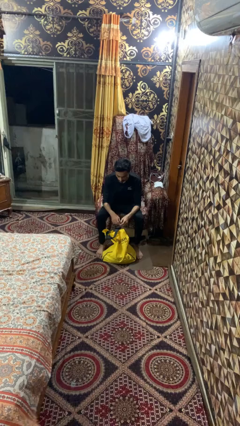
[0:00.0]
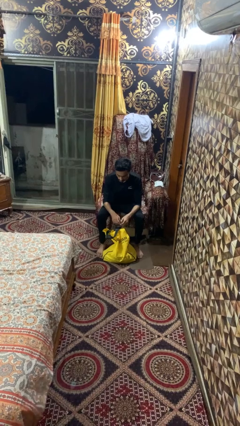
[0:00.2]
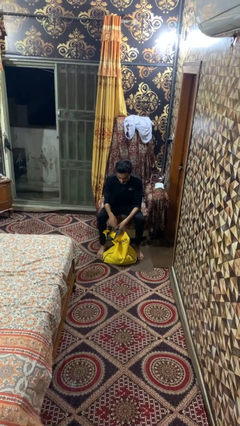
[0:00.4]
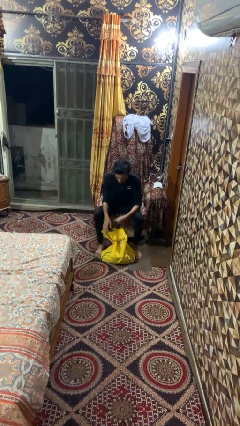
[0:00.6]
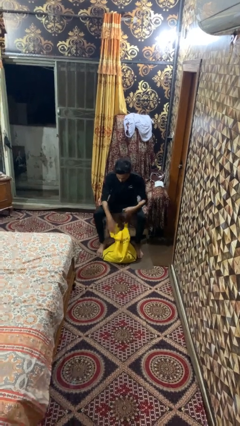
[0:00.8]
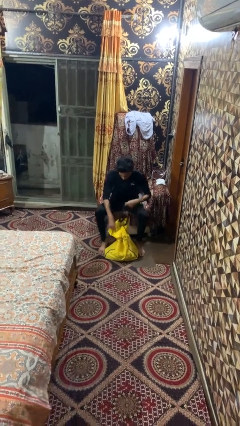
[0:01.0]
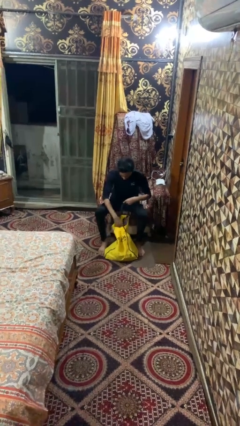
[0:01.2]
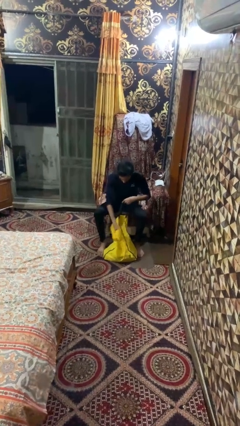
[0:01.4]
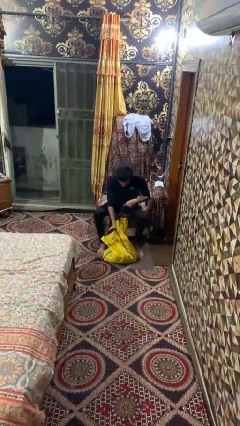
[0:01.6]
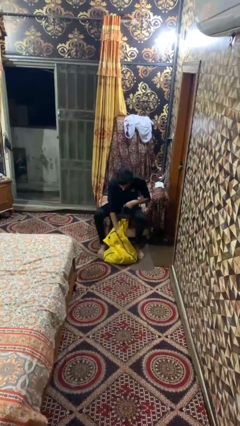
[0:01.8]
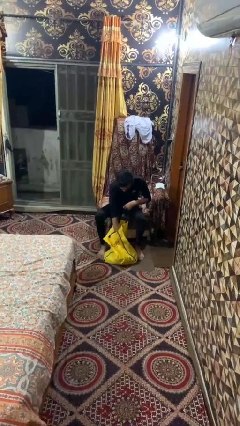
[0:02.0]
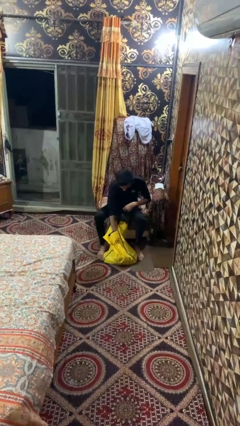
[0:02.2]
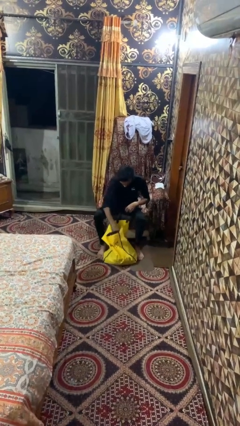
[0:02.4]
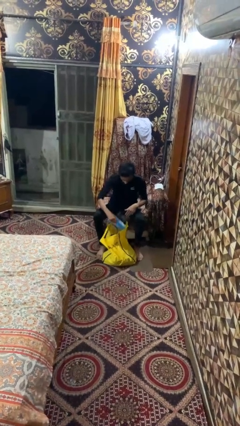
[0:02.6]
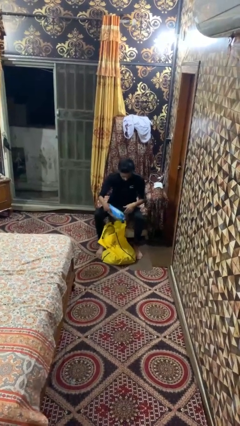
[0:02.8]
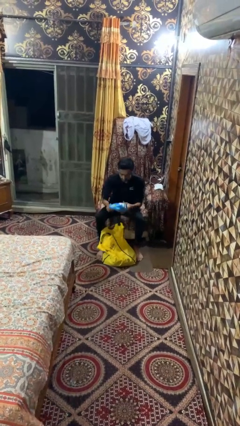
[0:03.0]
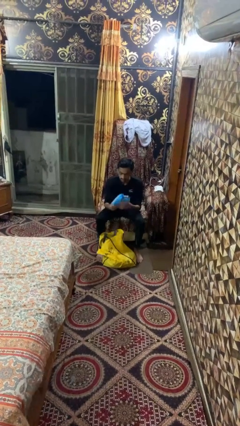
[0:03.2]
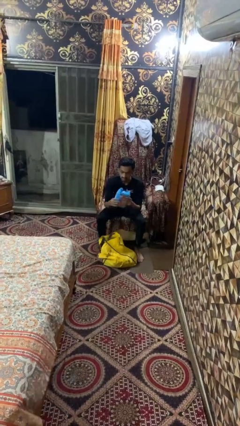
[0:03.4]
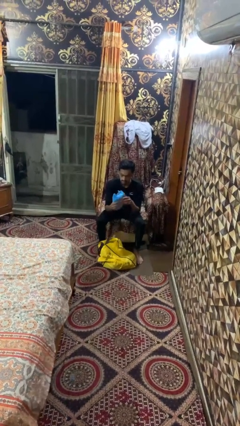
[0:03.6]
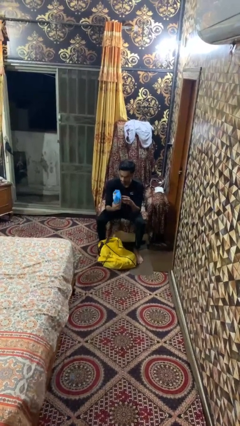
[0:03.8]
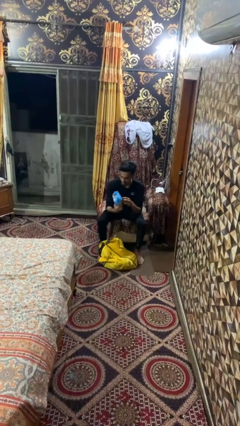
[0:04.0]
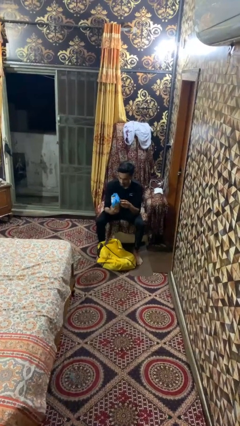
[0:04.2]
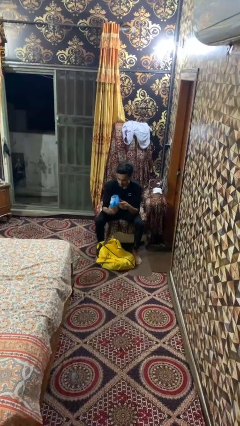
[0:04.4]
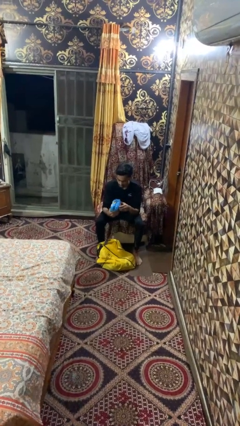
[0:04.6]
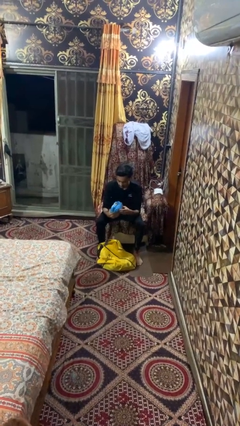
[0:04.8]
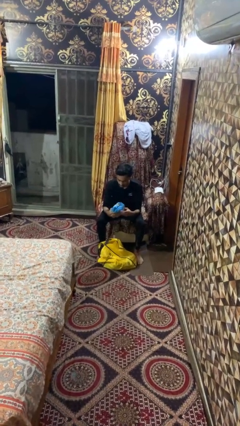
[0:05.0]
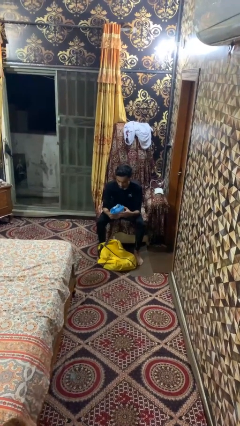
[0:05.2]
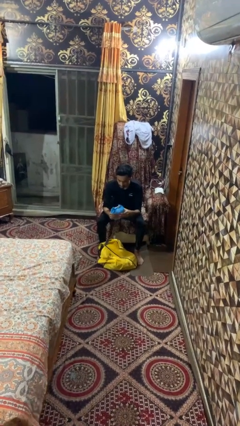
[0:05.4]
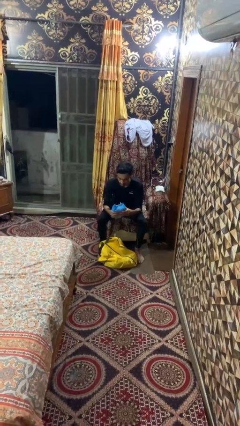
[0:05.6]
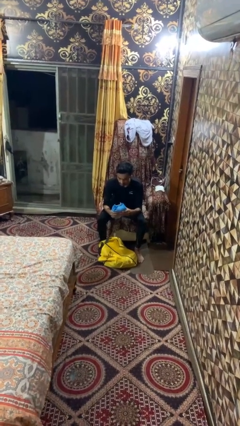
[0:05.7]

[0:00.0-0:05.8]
person takes object from bag

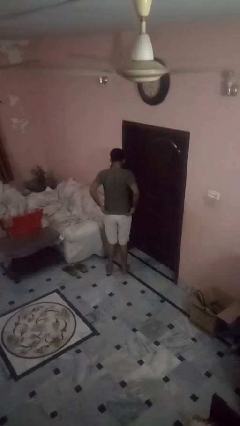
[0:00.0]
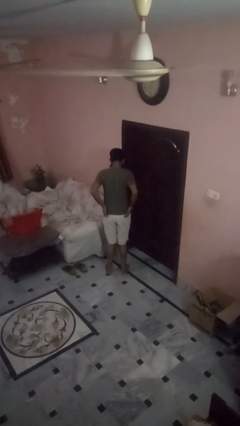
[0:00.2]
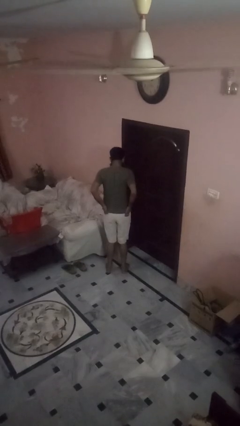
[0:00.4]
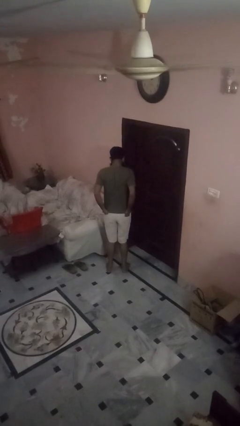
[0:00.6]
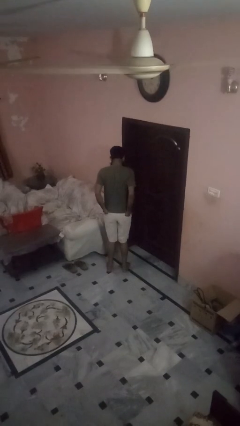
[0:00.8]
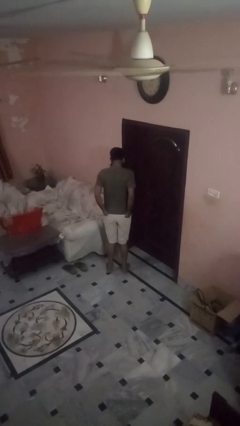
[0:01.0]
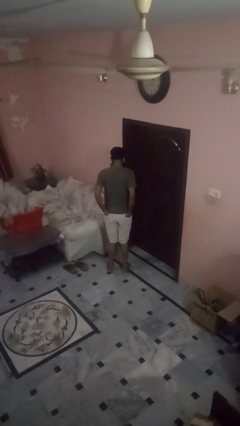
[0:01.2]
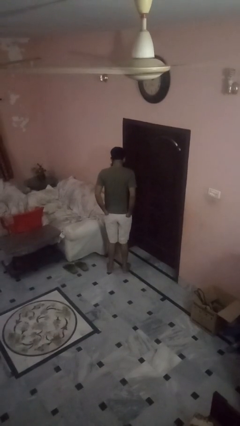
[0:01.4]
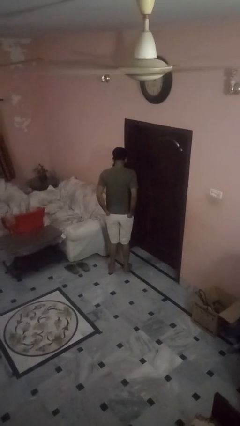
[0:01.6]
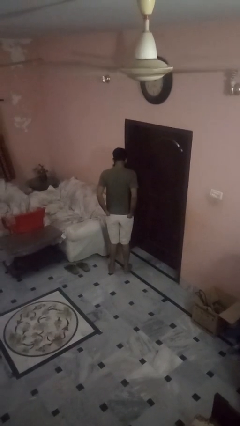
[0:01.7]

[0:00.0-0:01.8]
person puts hands in back pockets

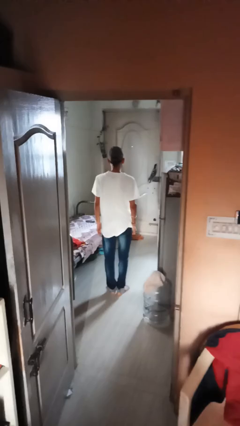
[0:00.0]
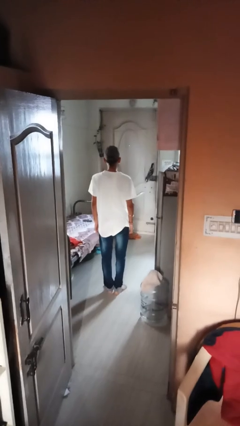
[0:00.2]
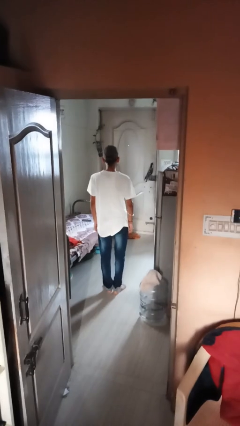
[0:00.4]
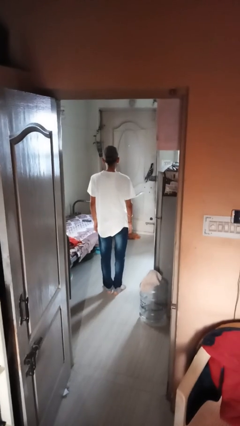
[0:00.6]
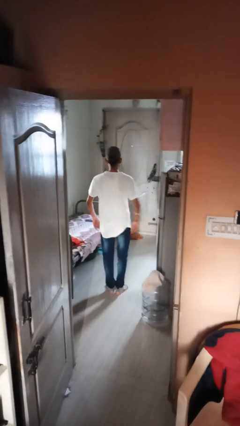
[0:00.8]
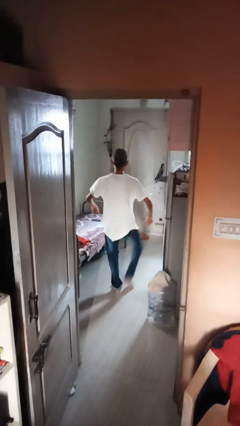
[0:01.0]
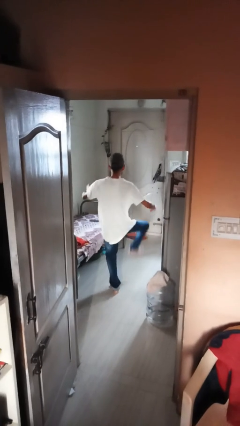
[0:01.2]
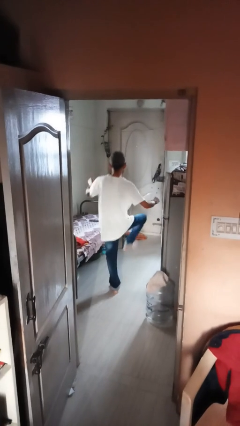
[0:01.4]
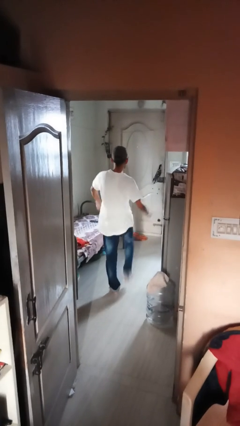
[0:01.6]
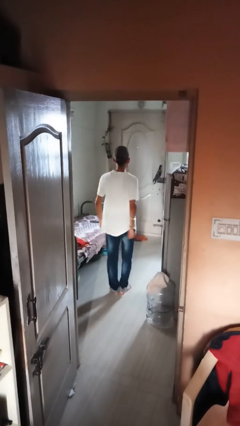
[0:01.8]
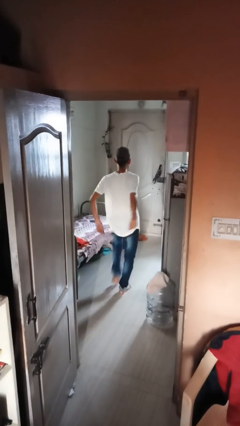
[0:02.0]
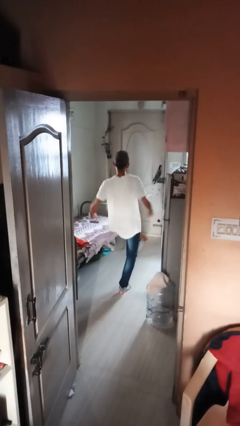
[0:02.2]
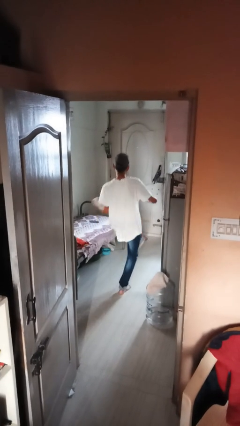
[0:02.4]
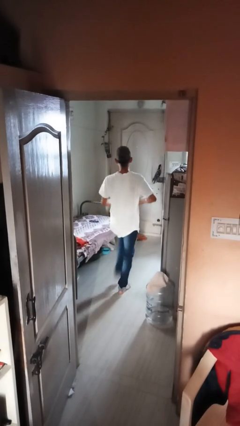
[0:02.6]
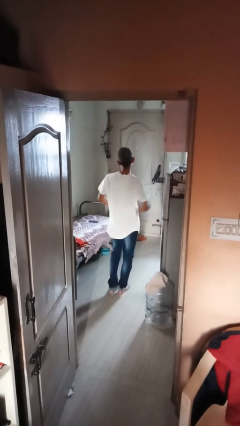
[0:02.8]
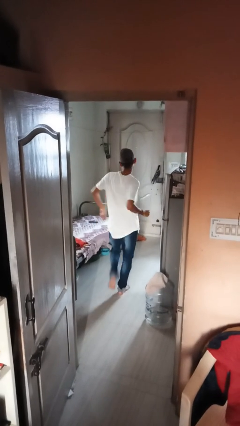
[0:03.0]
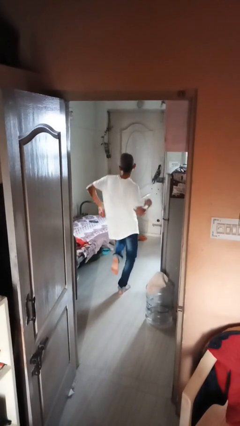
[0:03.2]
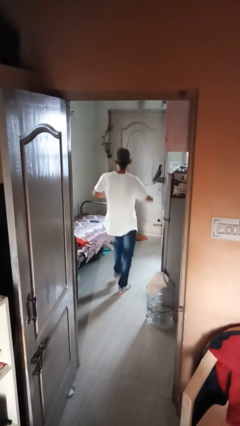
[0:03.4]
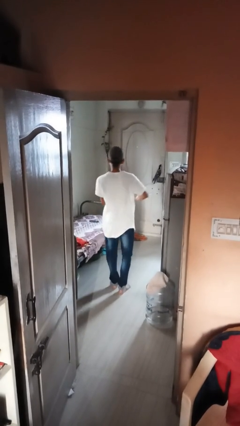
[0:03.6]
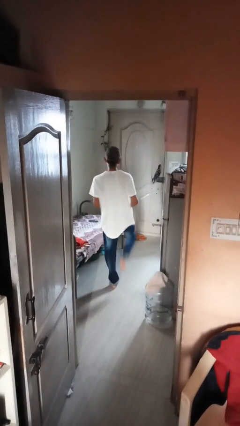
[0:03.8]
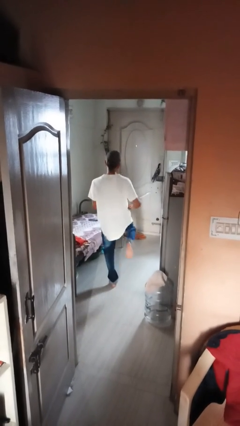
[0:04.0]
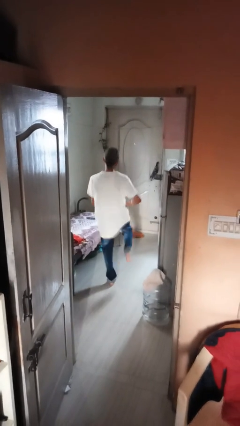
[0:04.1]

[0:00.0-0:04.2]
person dances in place

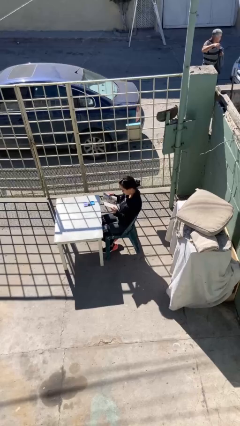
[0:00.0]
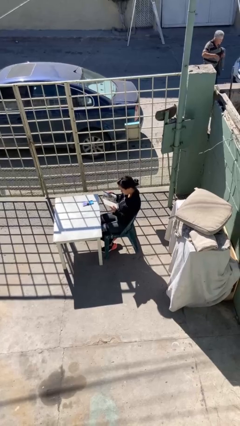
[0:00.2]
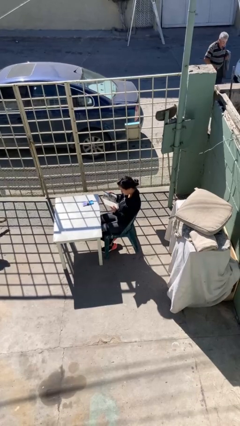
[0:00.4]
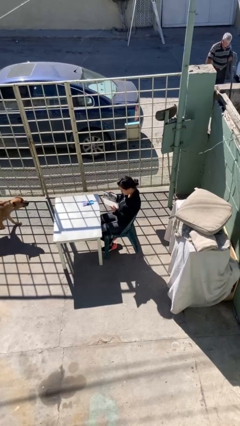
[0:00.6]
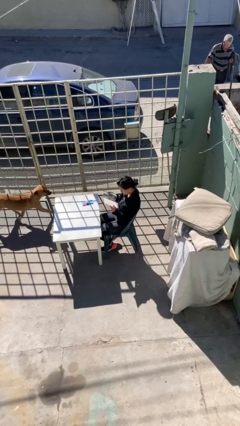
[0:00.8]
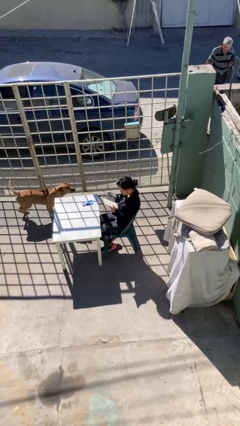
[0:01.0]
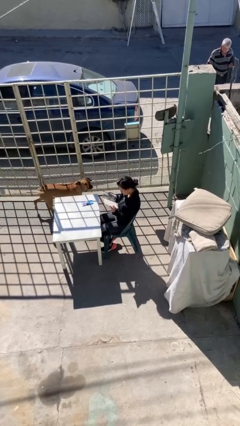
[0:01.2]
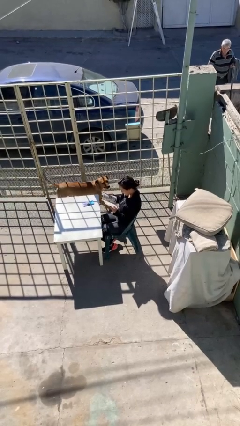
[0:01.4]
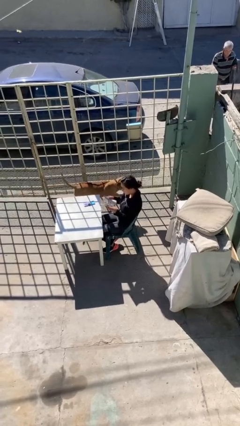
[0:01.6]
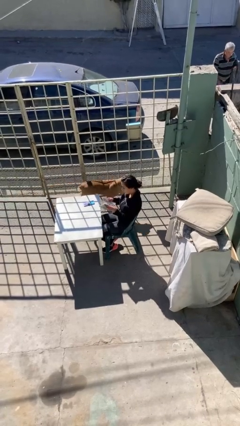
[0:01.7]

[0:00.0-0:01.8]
person reads document

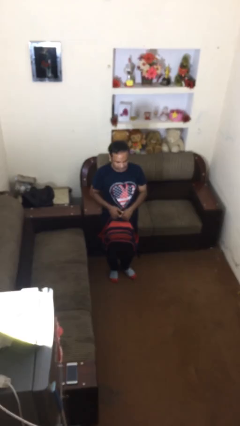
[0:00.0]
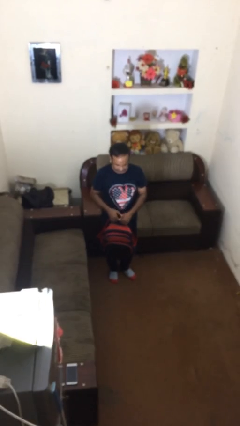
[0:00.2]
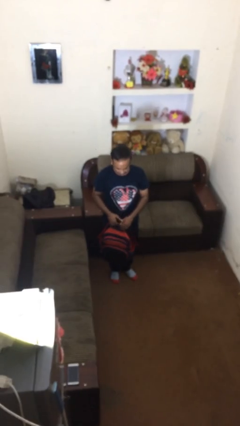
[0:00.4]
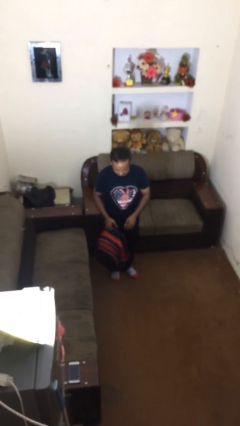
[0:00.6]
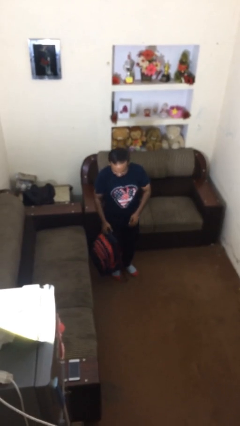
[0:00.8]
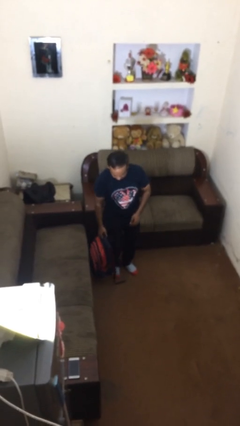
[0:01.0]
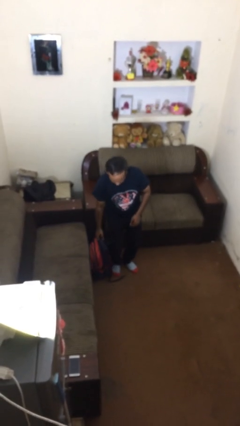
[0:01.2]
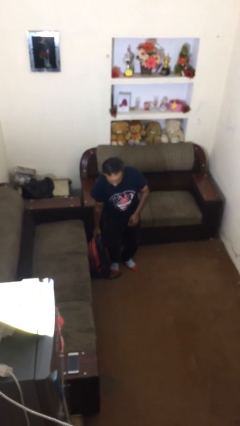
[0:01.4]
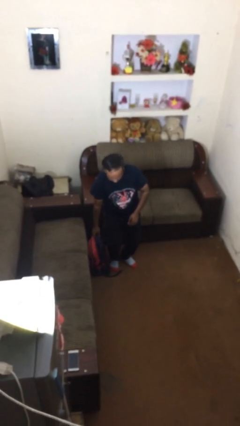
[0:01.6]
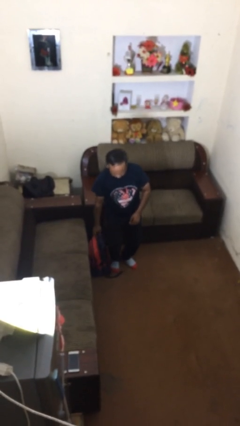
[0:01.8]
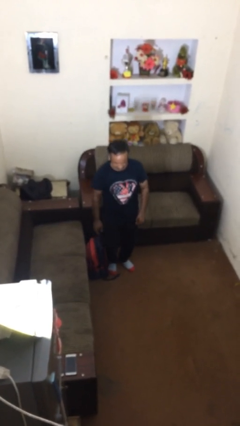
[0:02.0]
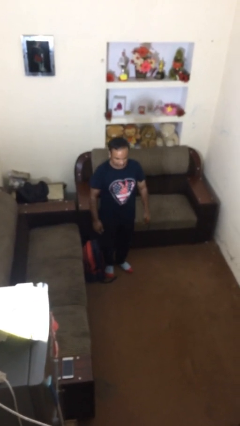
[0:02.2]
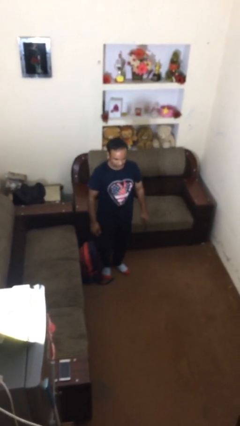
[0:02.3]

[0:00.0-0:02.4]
person puts down object on floor

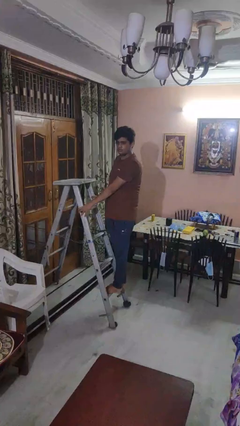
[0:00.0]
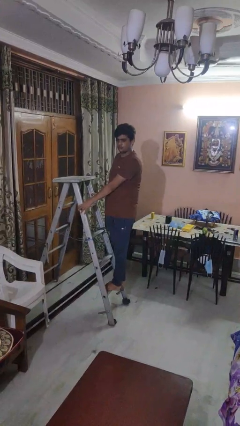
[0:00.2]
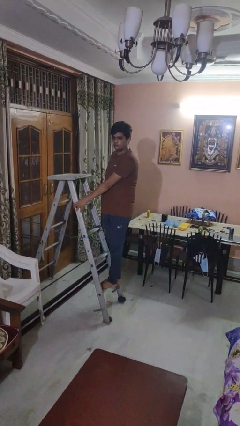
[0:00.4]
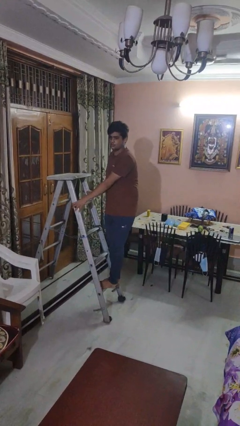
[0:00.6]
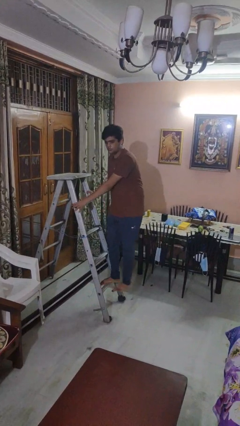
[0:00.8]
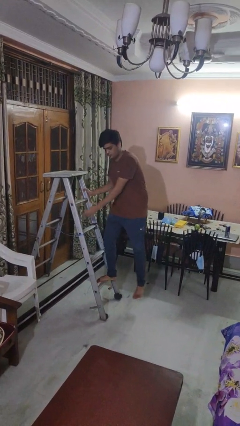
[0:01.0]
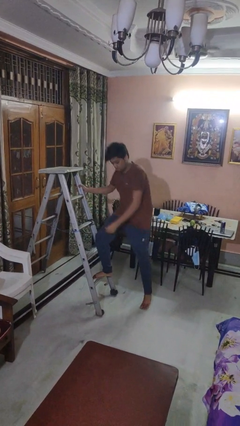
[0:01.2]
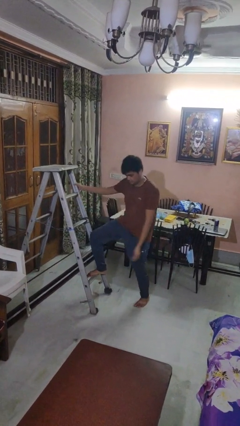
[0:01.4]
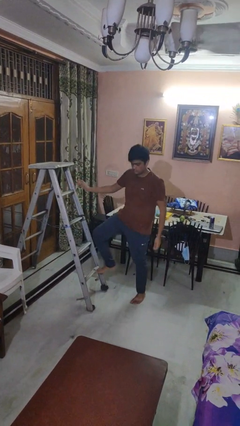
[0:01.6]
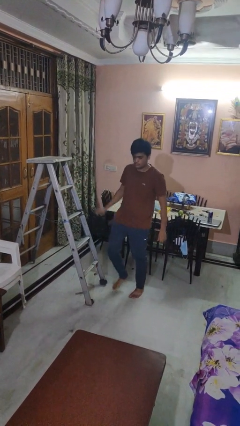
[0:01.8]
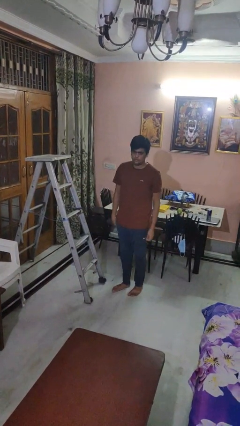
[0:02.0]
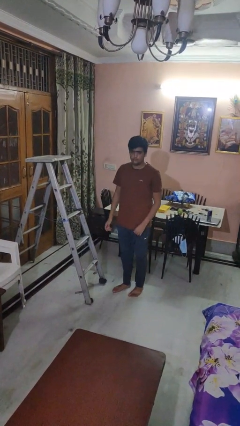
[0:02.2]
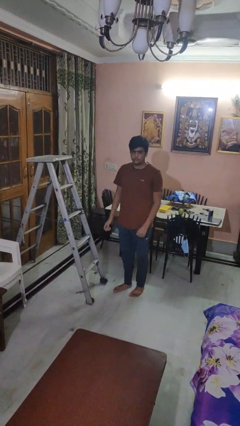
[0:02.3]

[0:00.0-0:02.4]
person climbs down ladder
